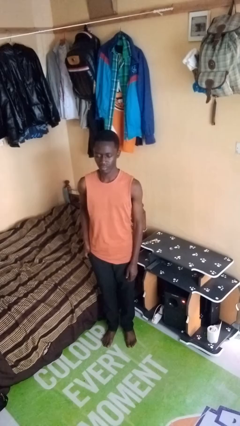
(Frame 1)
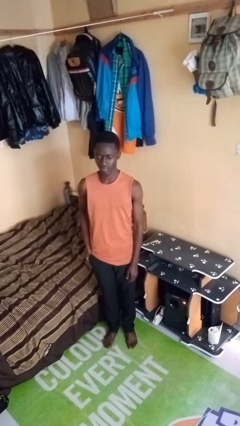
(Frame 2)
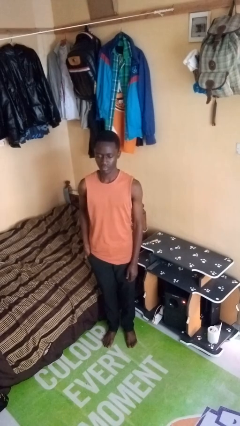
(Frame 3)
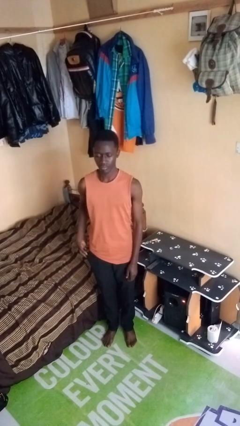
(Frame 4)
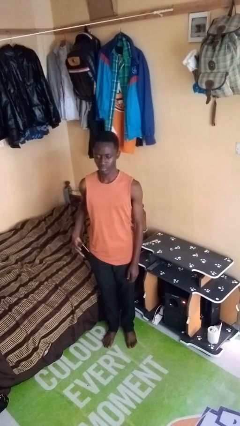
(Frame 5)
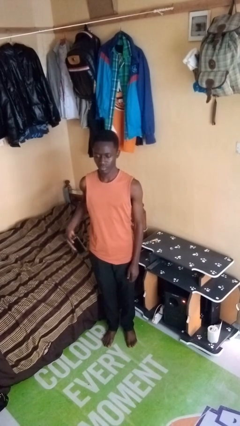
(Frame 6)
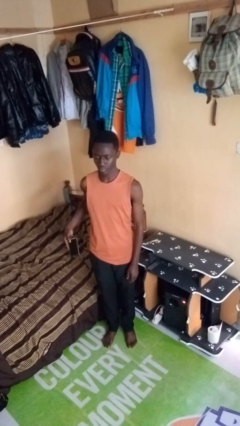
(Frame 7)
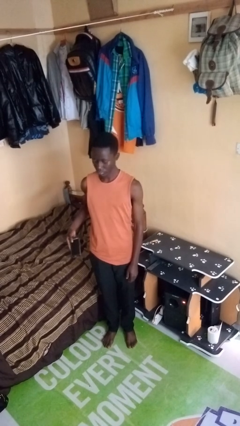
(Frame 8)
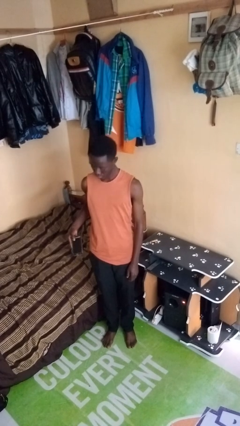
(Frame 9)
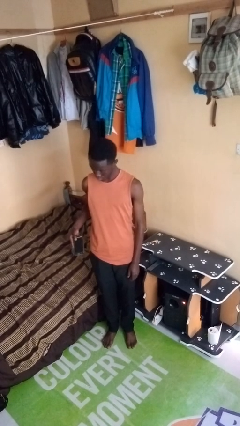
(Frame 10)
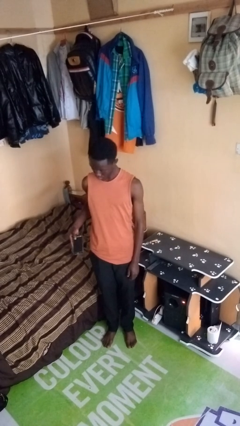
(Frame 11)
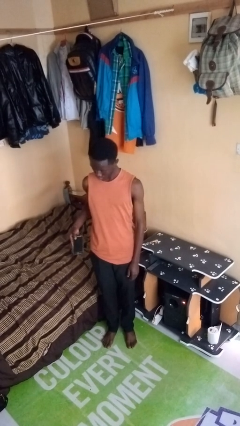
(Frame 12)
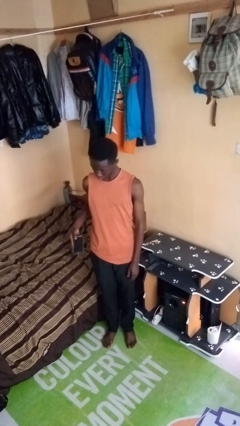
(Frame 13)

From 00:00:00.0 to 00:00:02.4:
person takes phone from pocket

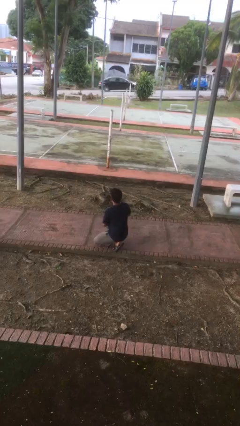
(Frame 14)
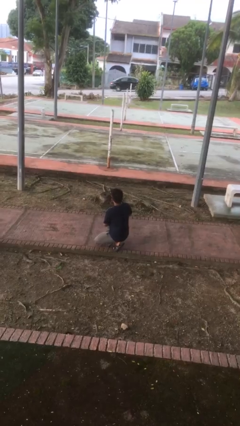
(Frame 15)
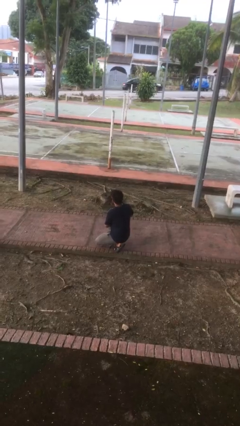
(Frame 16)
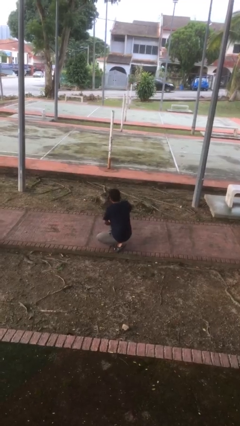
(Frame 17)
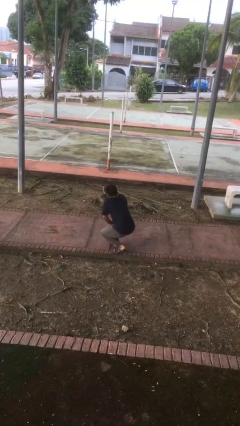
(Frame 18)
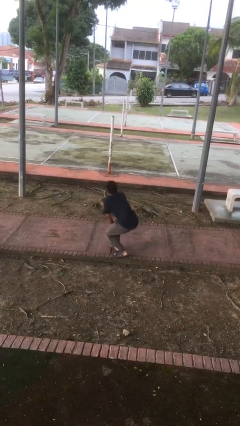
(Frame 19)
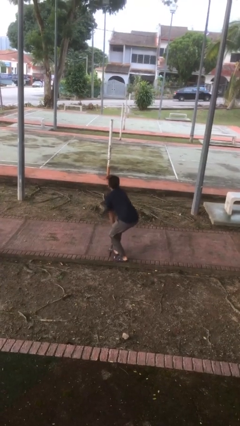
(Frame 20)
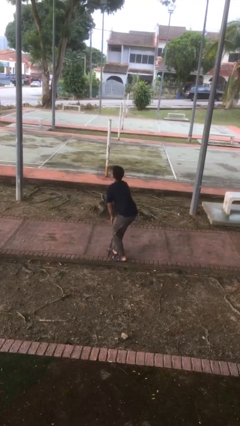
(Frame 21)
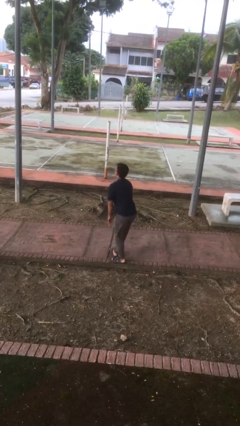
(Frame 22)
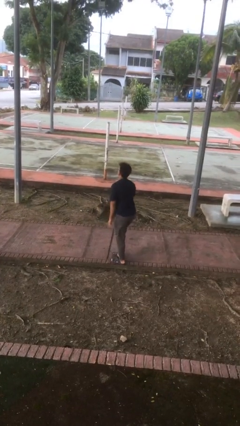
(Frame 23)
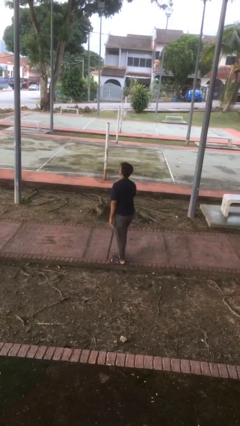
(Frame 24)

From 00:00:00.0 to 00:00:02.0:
person stands up from floor

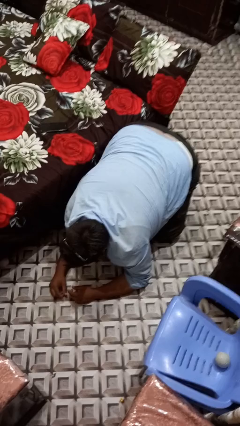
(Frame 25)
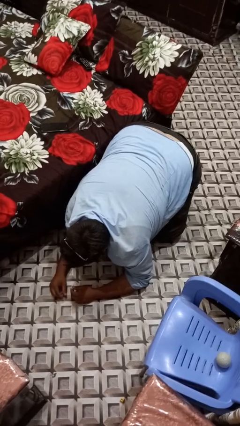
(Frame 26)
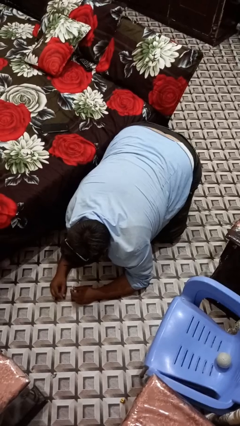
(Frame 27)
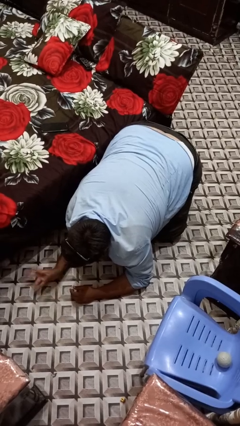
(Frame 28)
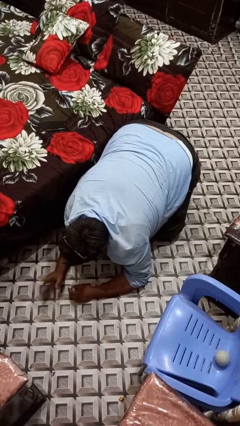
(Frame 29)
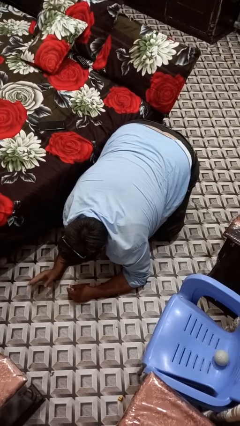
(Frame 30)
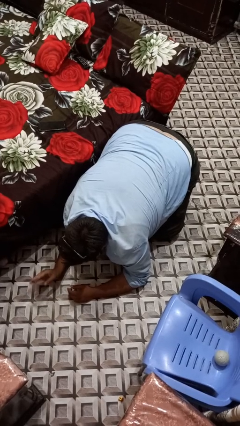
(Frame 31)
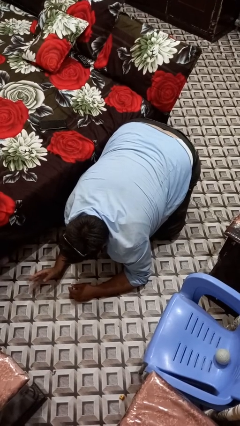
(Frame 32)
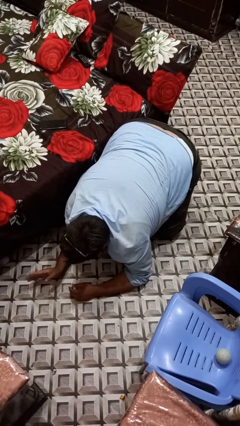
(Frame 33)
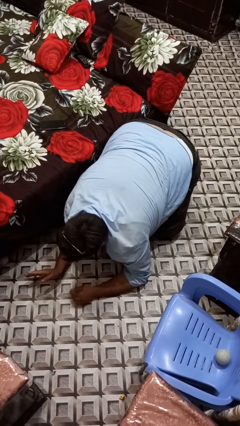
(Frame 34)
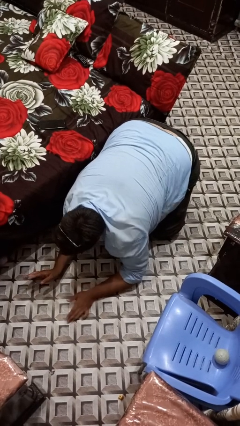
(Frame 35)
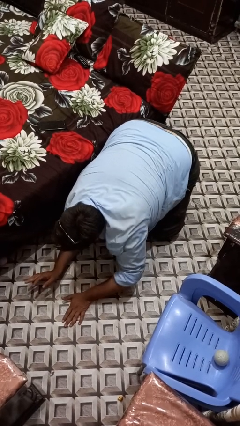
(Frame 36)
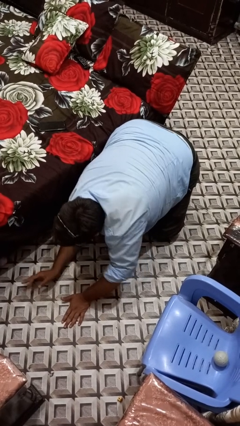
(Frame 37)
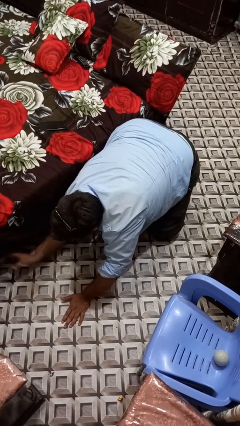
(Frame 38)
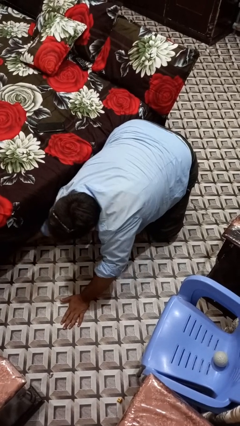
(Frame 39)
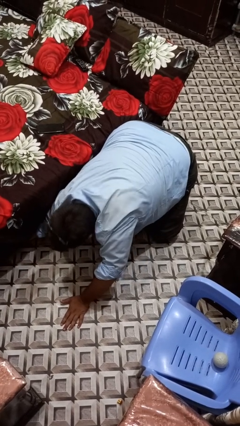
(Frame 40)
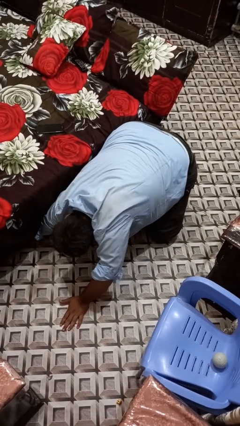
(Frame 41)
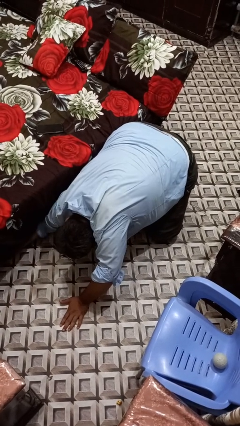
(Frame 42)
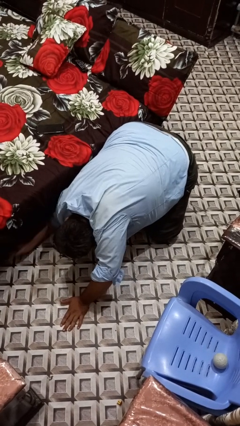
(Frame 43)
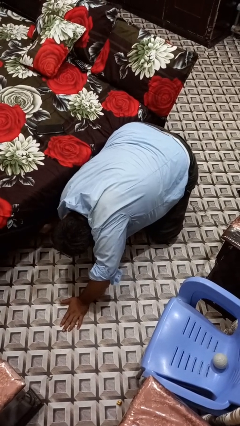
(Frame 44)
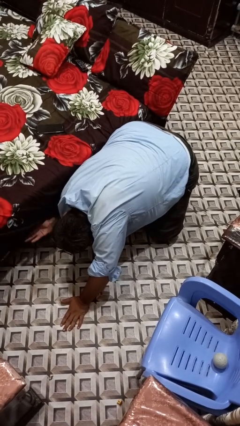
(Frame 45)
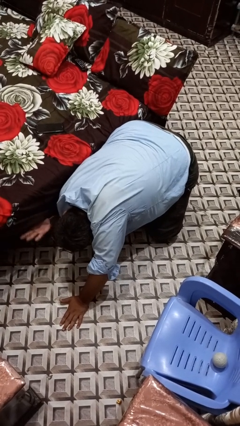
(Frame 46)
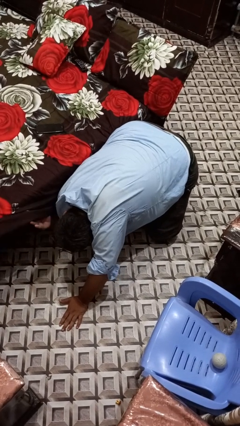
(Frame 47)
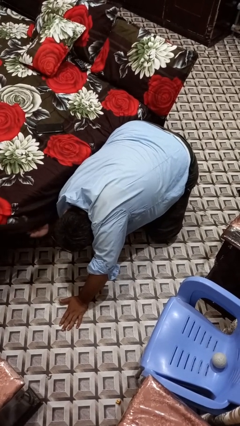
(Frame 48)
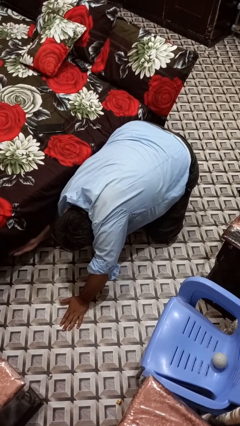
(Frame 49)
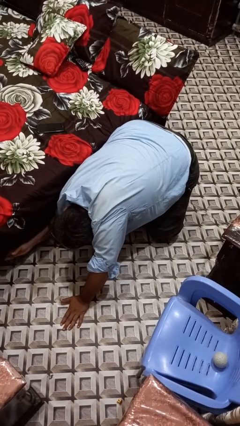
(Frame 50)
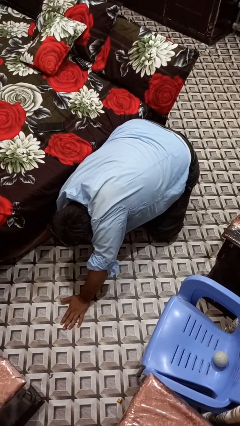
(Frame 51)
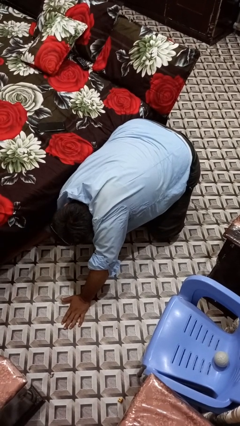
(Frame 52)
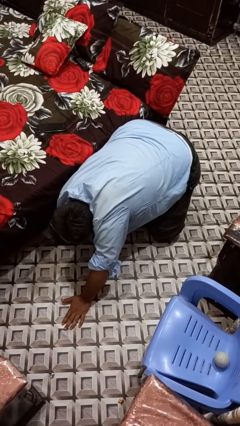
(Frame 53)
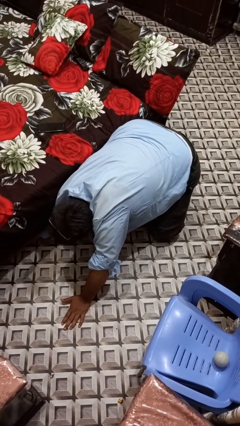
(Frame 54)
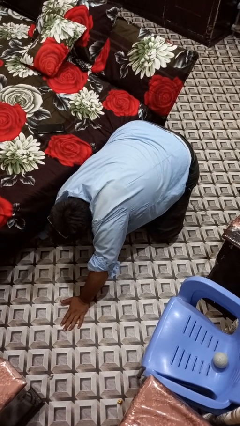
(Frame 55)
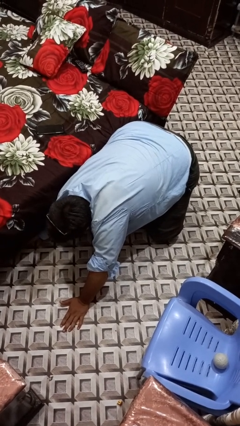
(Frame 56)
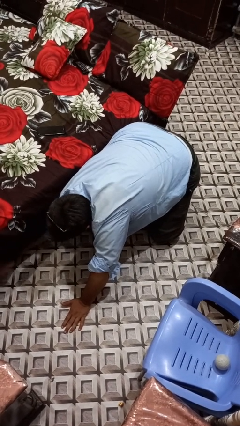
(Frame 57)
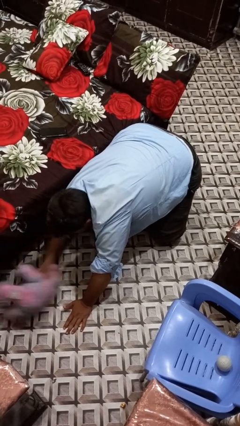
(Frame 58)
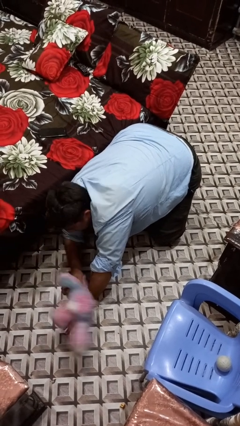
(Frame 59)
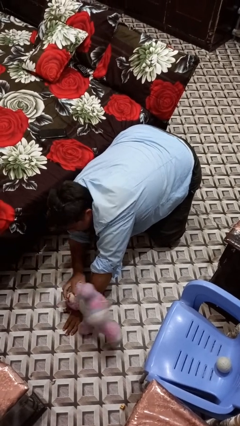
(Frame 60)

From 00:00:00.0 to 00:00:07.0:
person searches under bed

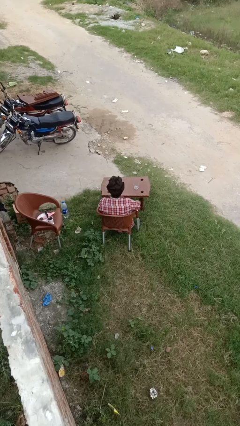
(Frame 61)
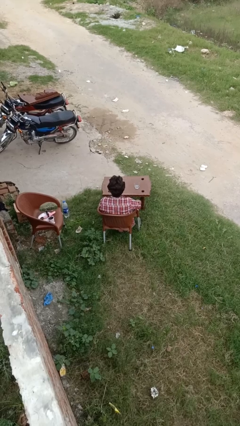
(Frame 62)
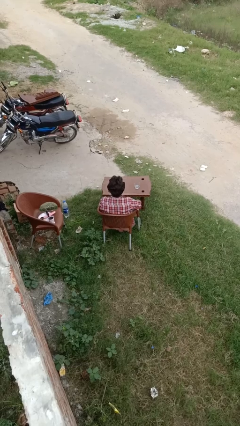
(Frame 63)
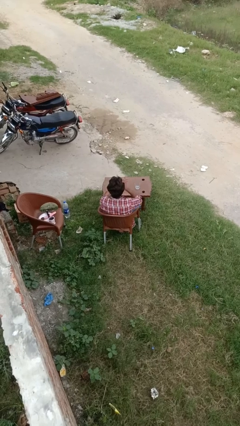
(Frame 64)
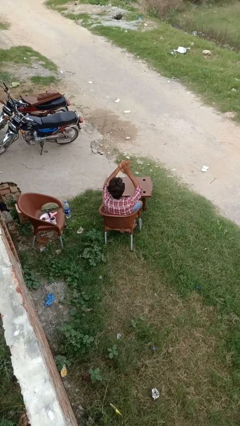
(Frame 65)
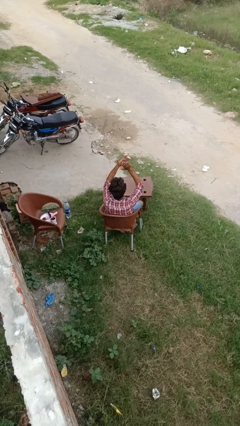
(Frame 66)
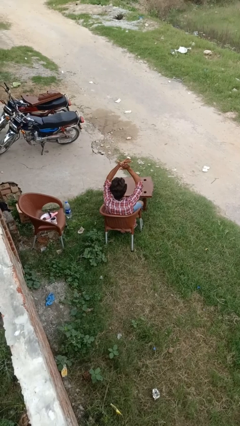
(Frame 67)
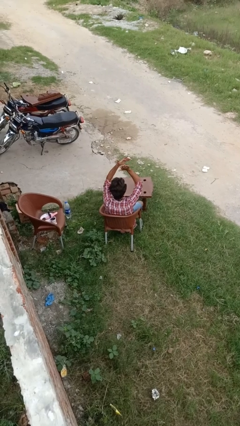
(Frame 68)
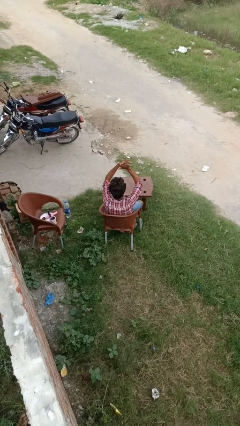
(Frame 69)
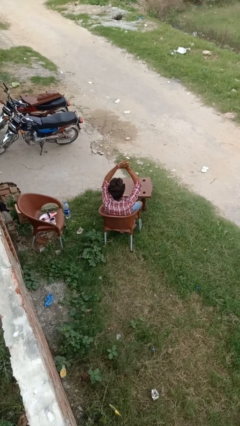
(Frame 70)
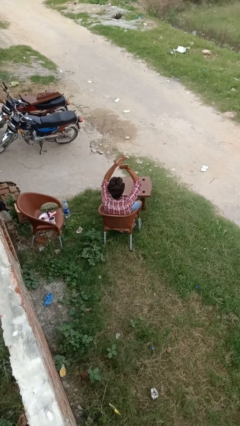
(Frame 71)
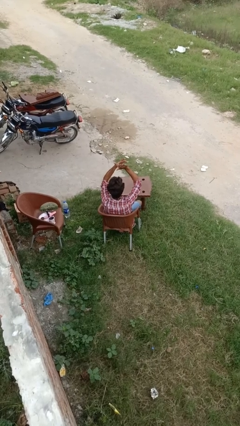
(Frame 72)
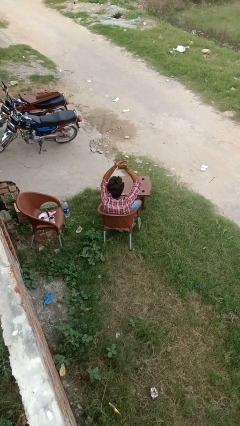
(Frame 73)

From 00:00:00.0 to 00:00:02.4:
person claps hands

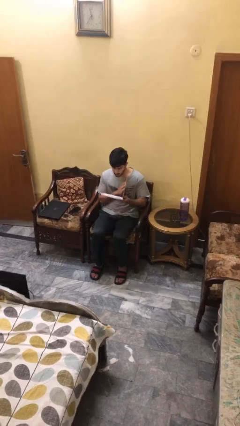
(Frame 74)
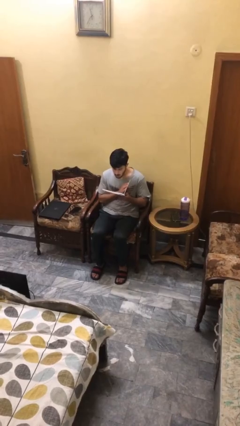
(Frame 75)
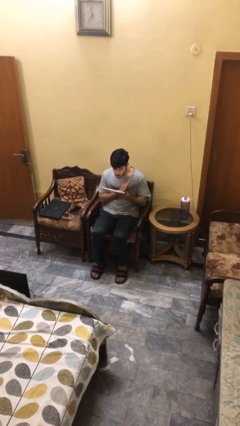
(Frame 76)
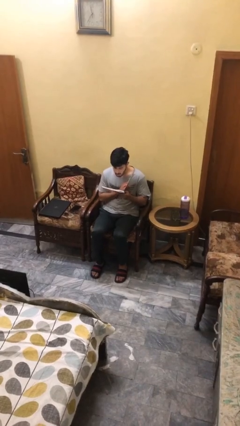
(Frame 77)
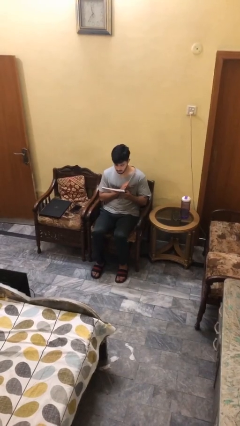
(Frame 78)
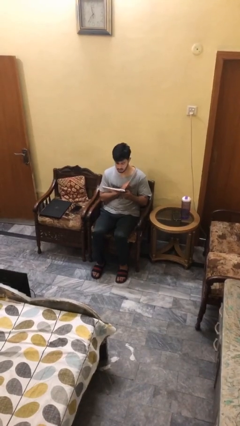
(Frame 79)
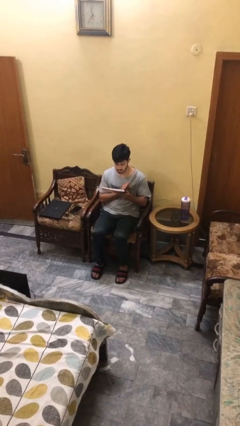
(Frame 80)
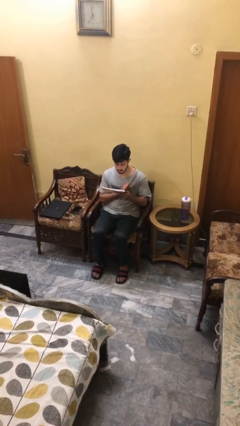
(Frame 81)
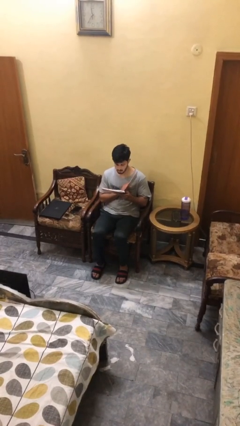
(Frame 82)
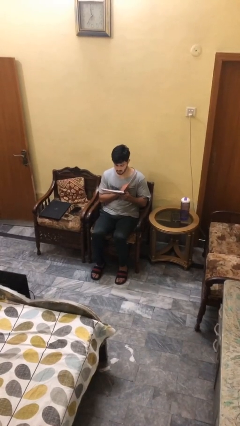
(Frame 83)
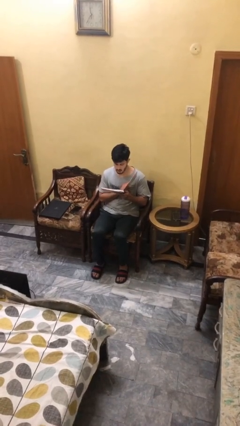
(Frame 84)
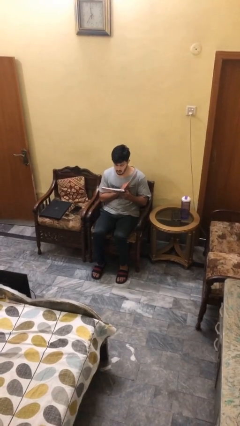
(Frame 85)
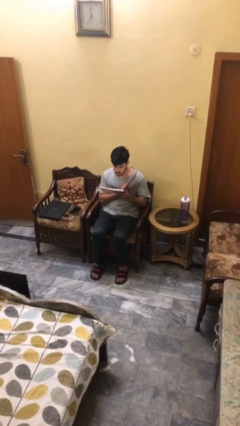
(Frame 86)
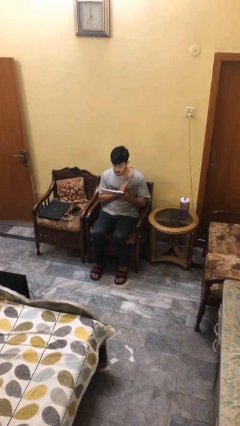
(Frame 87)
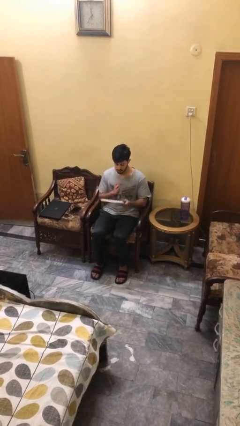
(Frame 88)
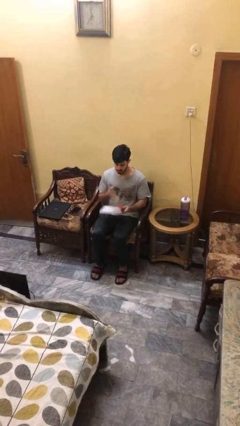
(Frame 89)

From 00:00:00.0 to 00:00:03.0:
person reads document

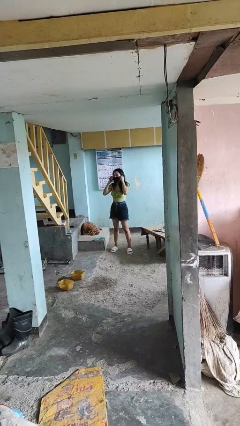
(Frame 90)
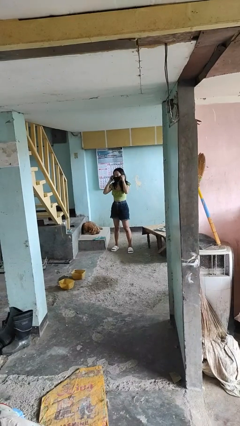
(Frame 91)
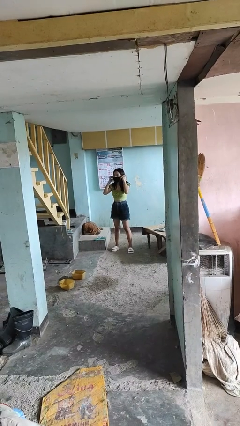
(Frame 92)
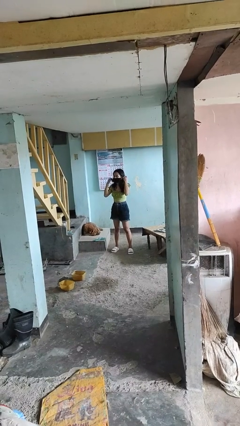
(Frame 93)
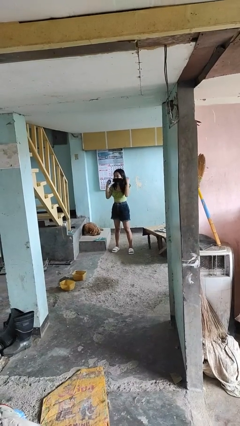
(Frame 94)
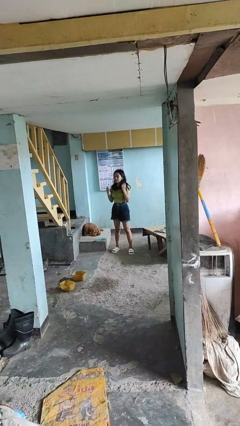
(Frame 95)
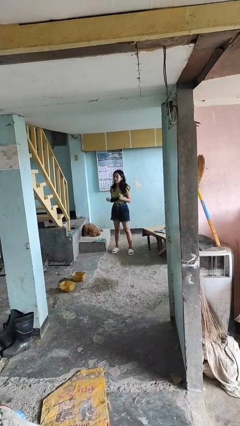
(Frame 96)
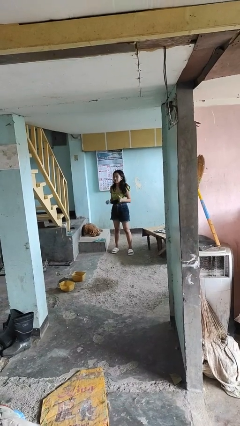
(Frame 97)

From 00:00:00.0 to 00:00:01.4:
person takes off facemask
